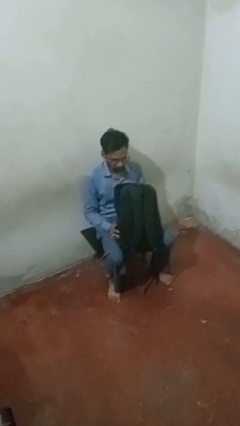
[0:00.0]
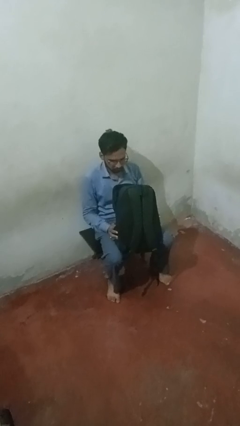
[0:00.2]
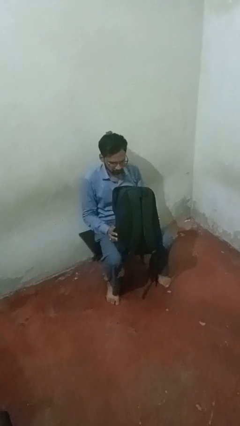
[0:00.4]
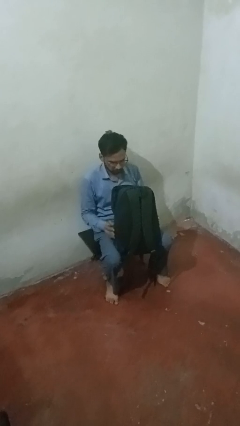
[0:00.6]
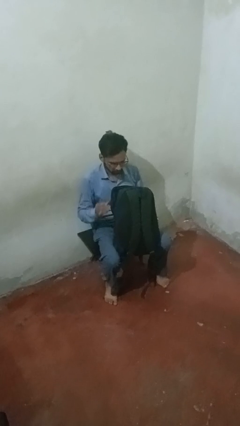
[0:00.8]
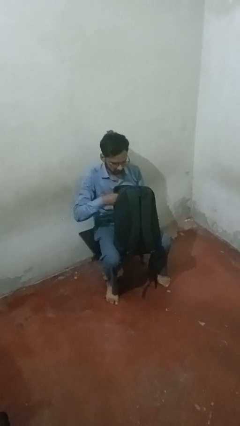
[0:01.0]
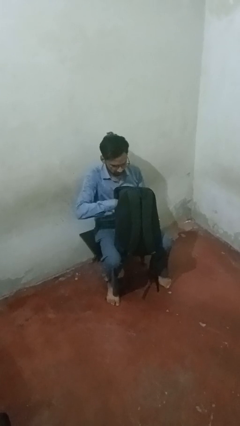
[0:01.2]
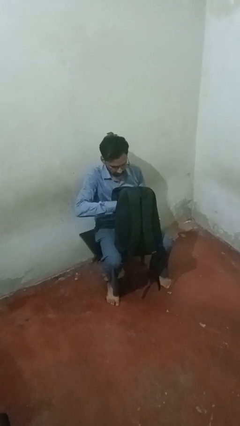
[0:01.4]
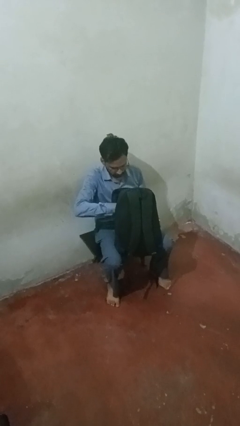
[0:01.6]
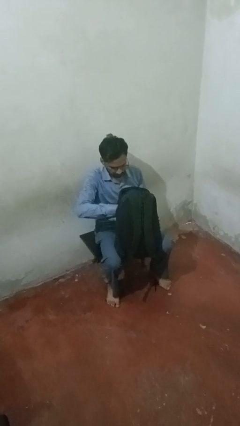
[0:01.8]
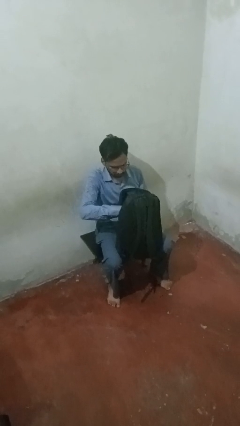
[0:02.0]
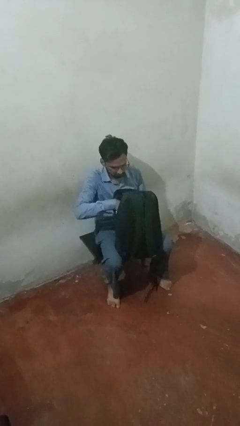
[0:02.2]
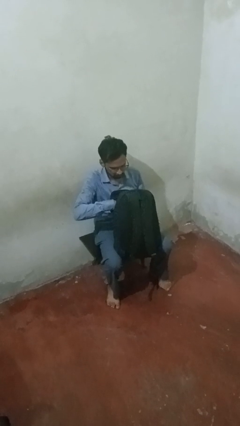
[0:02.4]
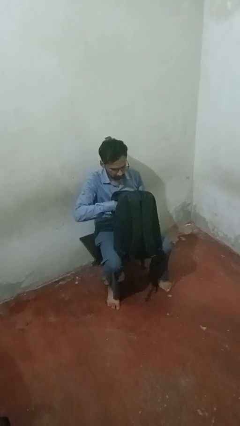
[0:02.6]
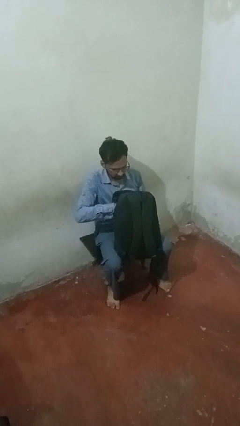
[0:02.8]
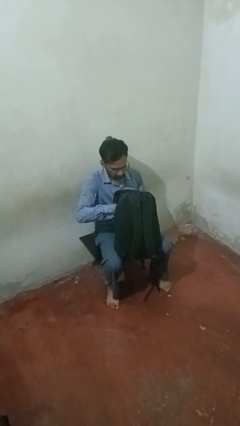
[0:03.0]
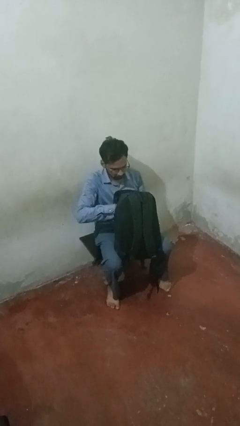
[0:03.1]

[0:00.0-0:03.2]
person searches in purse

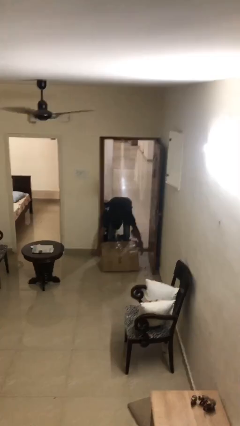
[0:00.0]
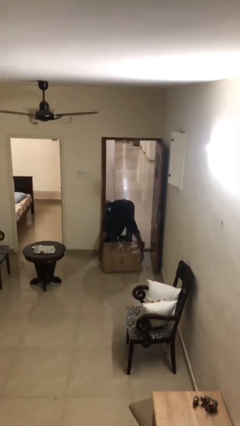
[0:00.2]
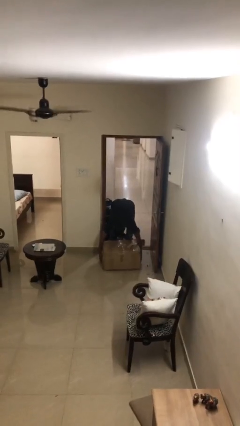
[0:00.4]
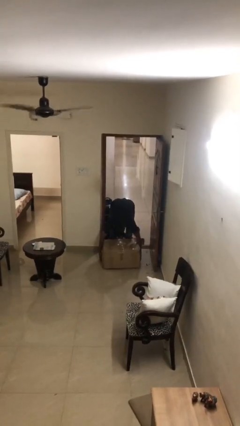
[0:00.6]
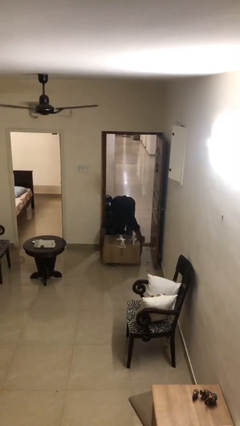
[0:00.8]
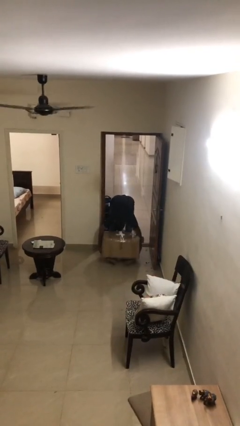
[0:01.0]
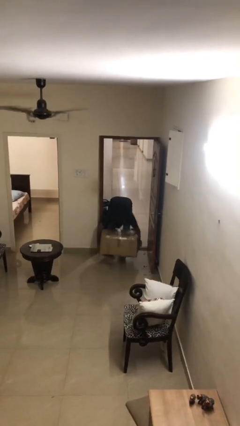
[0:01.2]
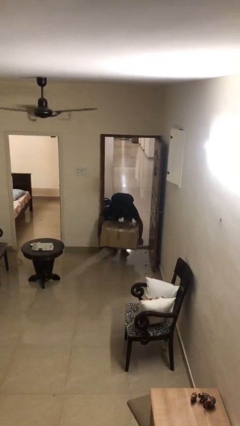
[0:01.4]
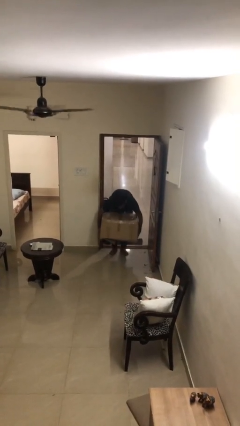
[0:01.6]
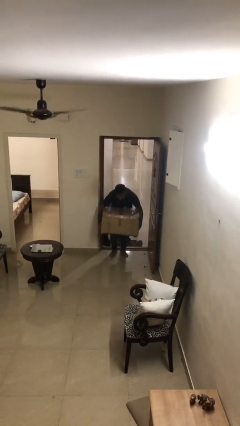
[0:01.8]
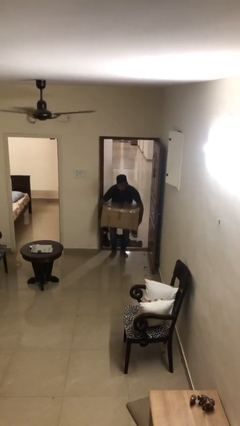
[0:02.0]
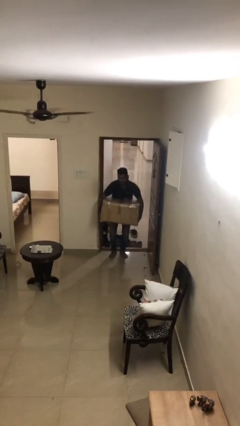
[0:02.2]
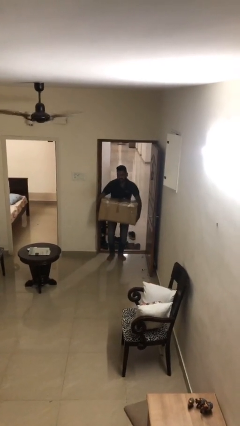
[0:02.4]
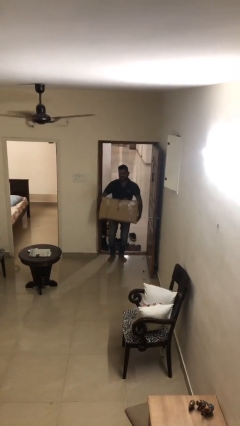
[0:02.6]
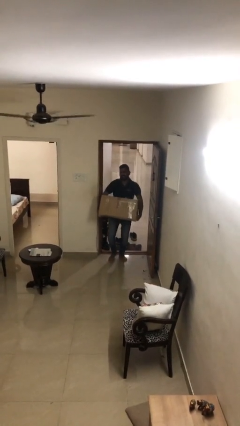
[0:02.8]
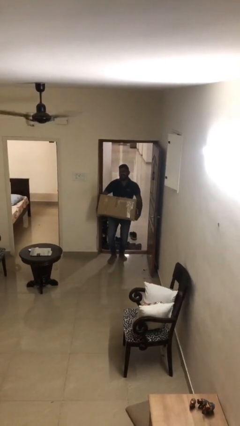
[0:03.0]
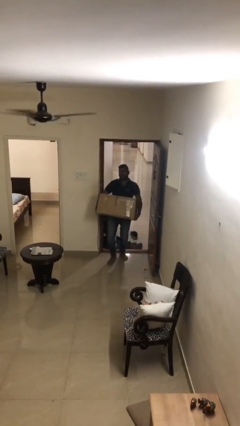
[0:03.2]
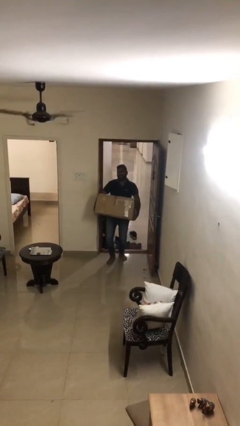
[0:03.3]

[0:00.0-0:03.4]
person picks up object from floor

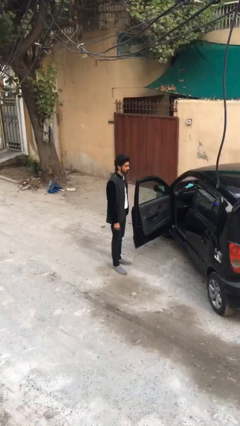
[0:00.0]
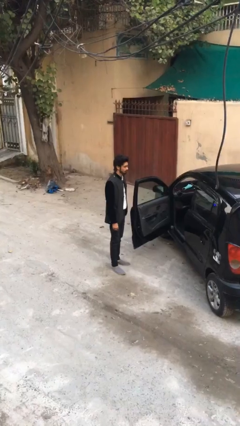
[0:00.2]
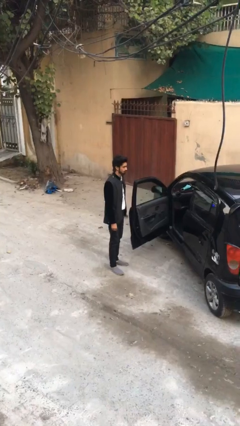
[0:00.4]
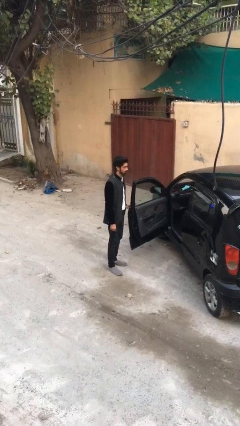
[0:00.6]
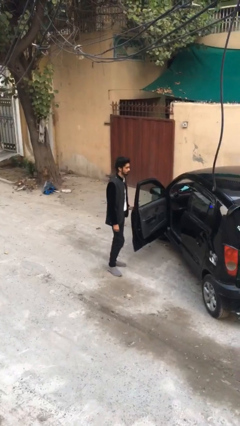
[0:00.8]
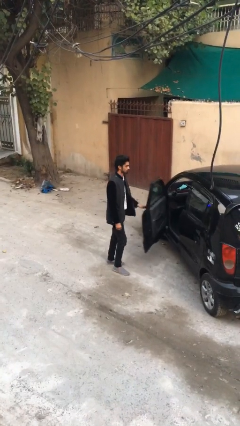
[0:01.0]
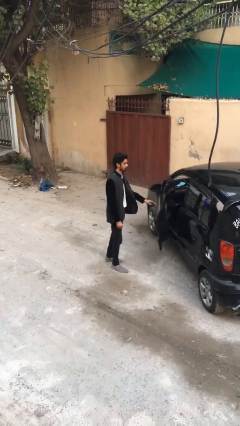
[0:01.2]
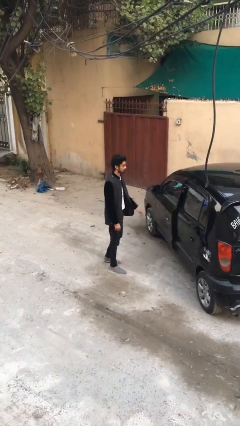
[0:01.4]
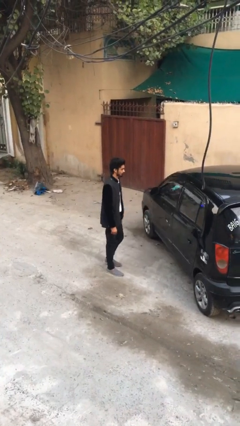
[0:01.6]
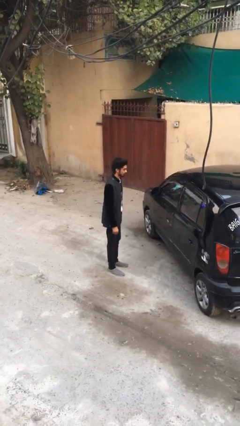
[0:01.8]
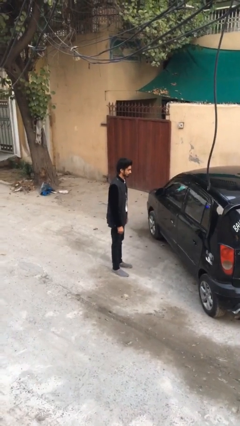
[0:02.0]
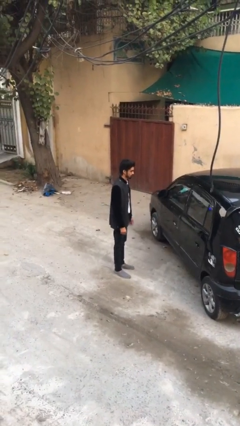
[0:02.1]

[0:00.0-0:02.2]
person closes car door

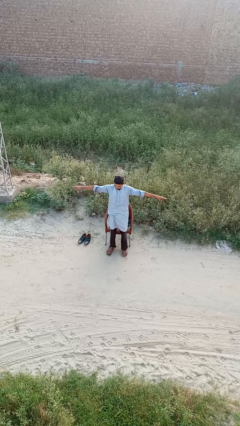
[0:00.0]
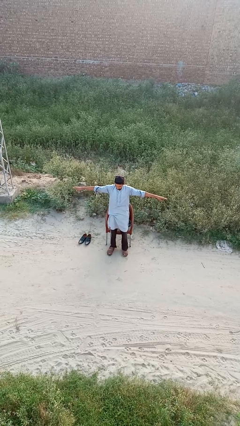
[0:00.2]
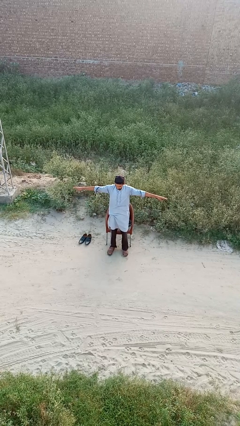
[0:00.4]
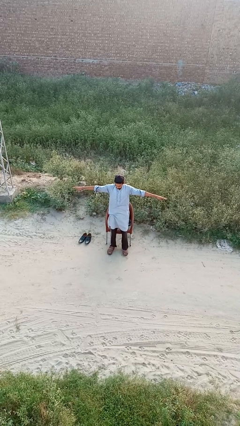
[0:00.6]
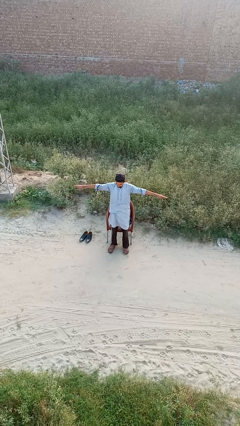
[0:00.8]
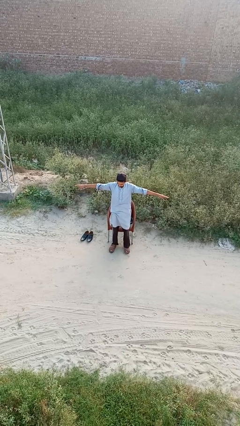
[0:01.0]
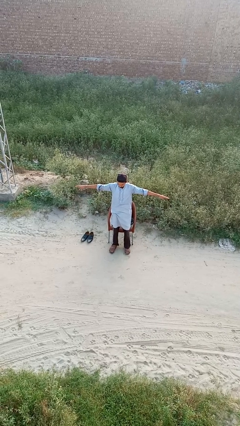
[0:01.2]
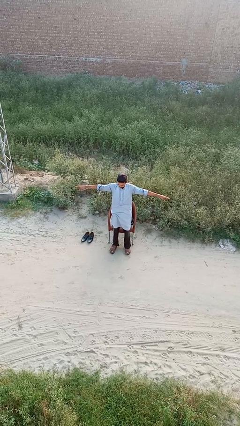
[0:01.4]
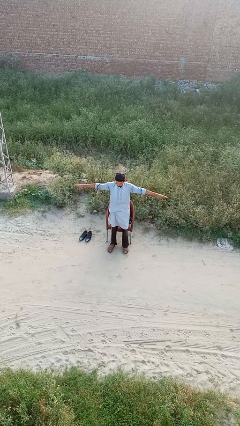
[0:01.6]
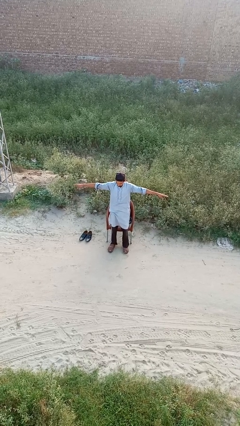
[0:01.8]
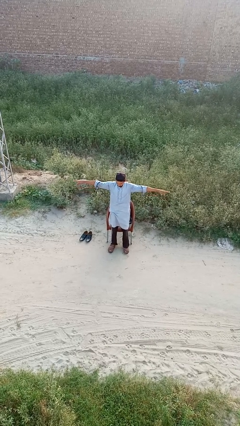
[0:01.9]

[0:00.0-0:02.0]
person stretches arms to side

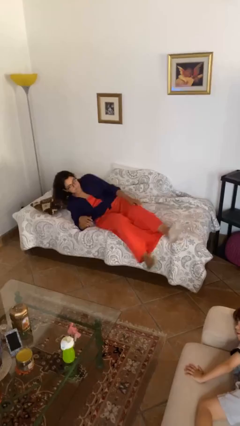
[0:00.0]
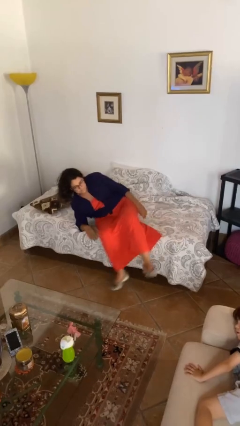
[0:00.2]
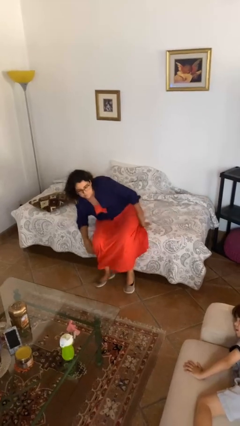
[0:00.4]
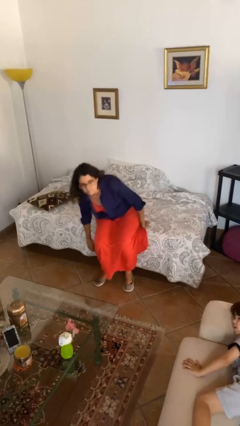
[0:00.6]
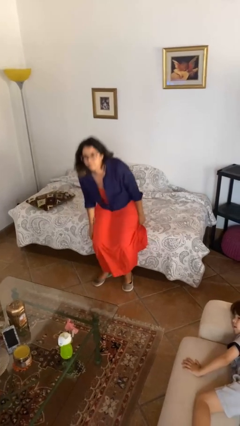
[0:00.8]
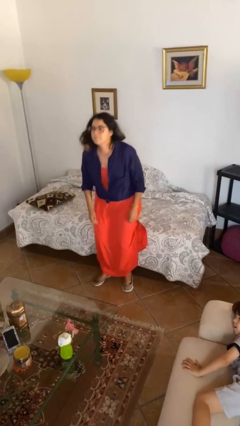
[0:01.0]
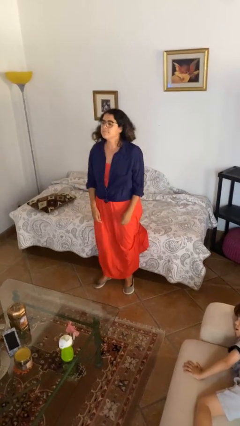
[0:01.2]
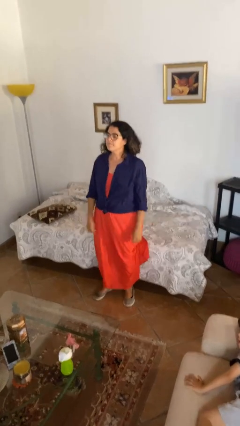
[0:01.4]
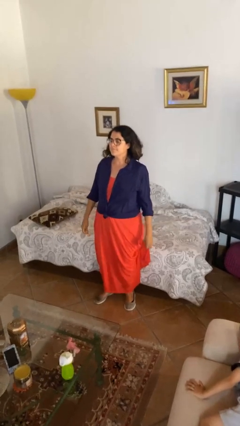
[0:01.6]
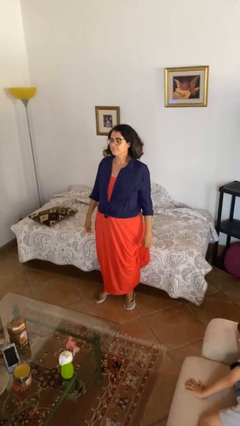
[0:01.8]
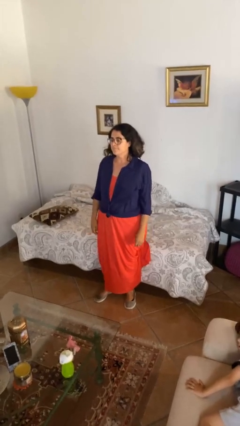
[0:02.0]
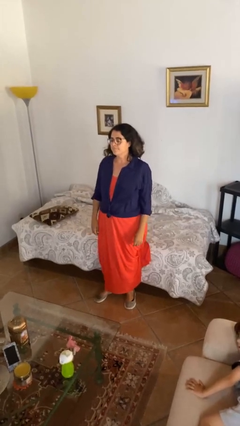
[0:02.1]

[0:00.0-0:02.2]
person stands up

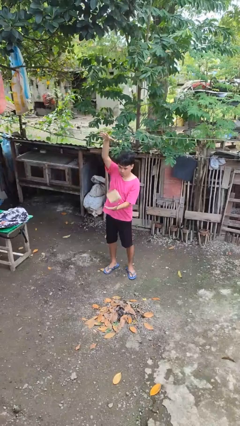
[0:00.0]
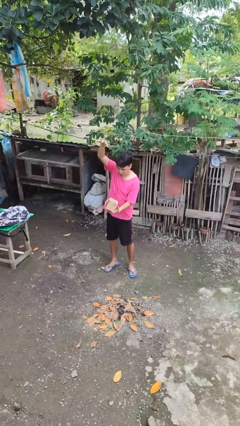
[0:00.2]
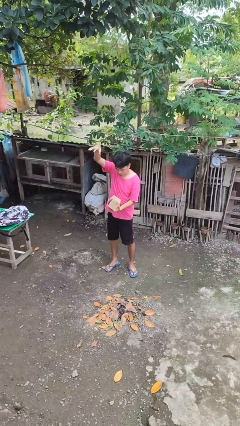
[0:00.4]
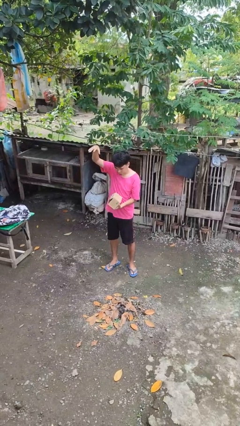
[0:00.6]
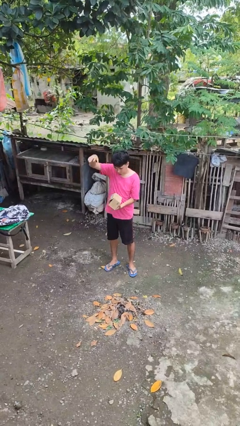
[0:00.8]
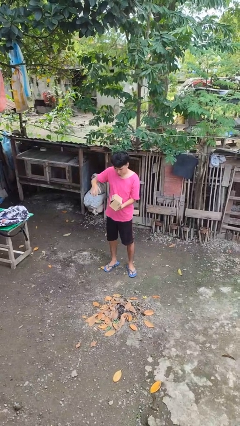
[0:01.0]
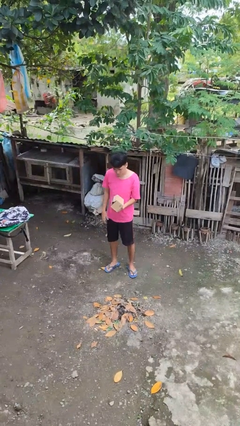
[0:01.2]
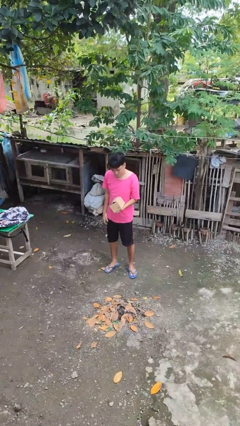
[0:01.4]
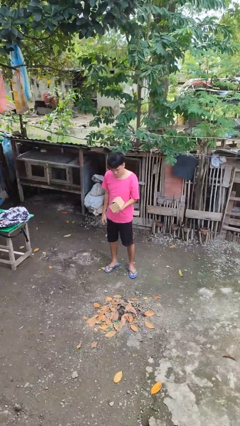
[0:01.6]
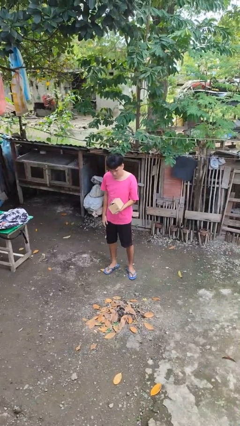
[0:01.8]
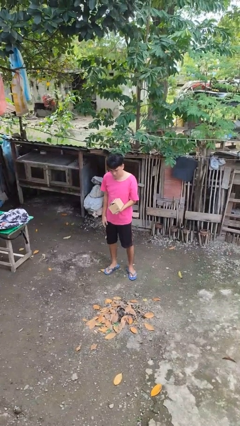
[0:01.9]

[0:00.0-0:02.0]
person catches dropped object

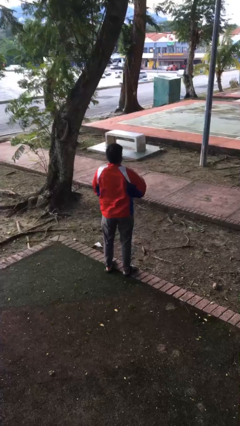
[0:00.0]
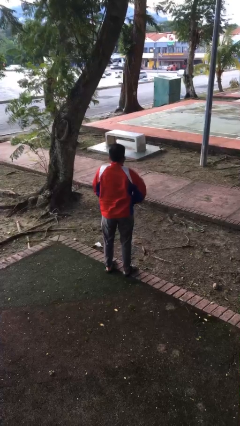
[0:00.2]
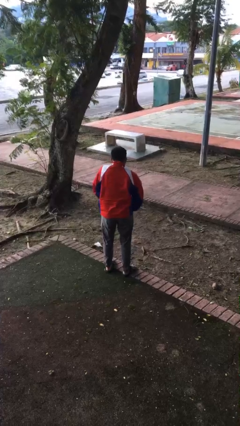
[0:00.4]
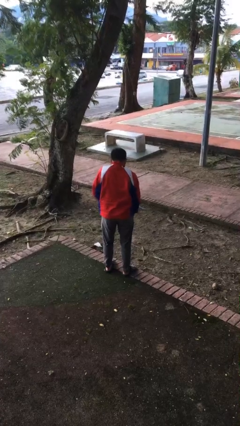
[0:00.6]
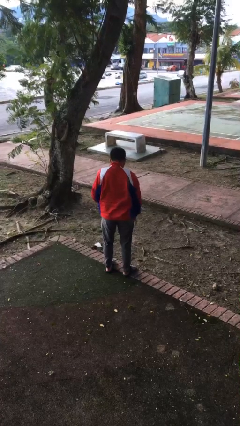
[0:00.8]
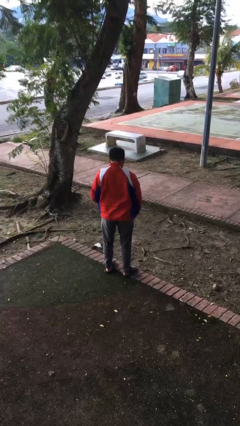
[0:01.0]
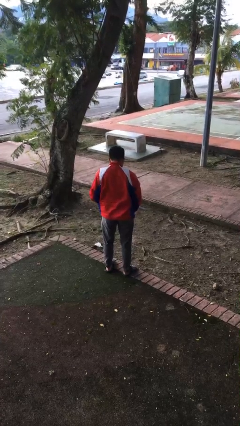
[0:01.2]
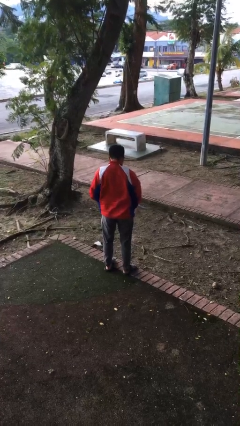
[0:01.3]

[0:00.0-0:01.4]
person unzips jacket

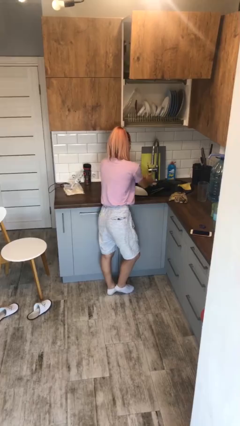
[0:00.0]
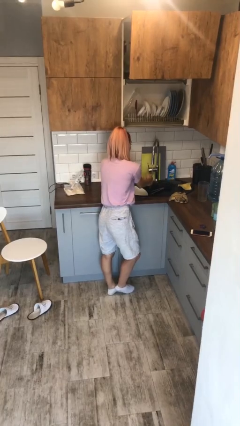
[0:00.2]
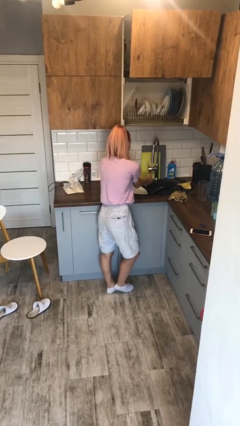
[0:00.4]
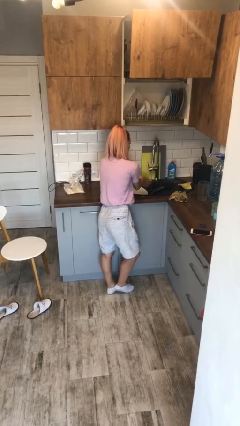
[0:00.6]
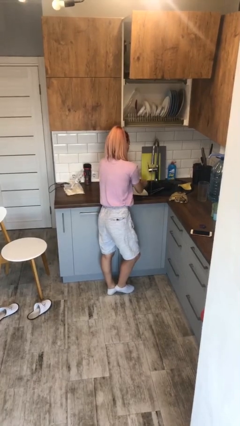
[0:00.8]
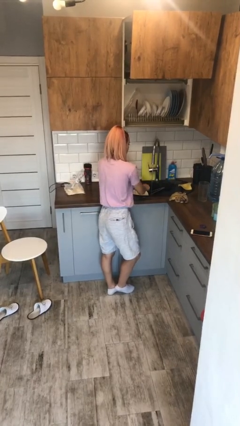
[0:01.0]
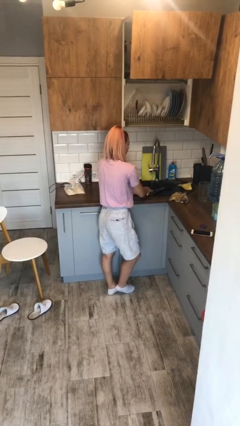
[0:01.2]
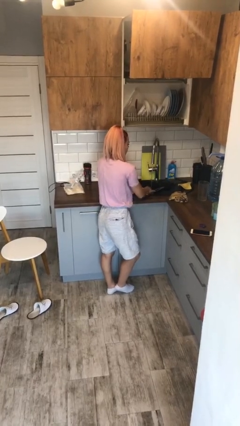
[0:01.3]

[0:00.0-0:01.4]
person washes hands
